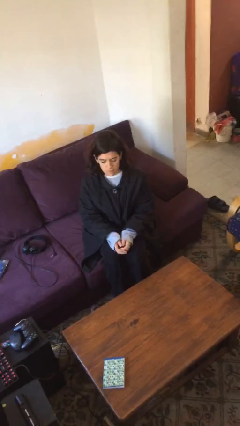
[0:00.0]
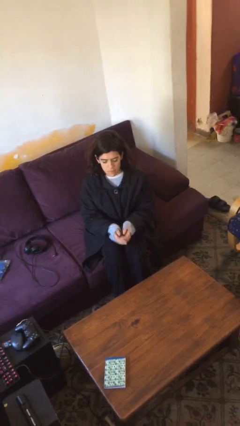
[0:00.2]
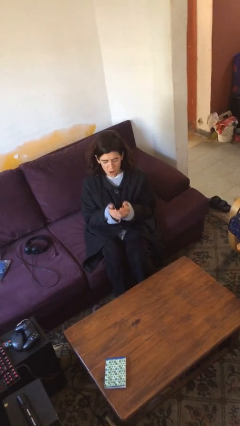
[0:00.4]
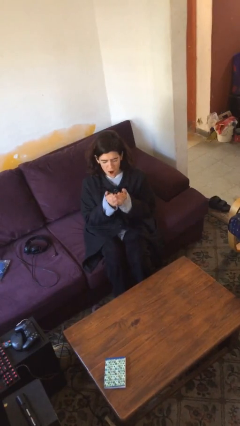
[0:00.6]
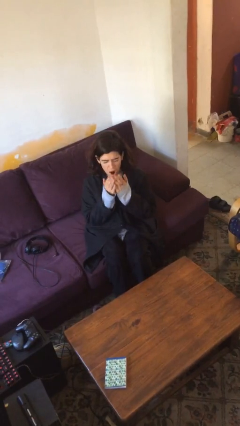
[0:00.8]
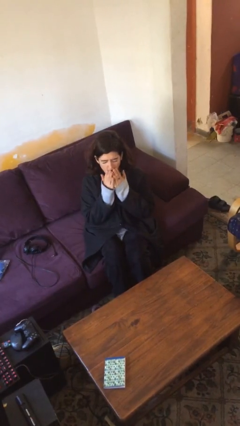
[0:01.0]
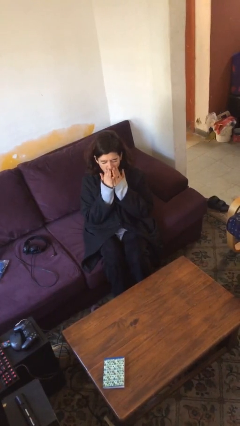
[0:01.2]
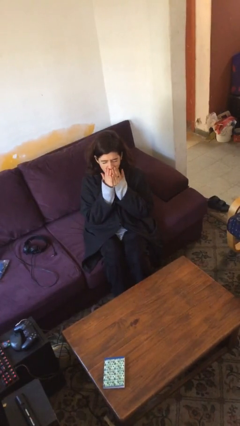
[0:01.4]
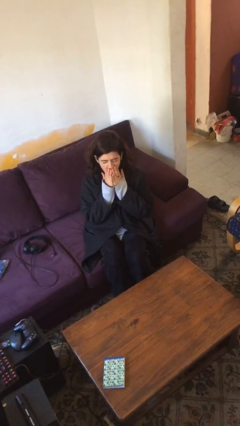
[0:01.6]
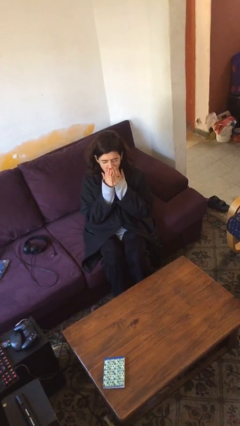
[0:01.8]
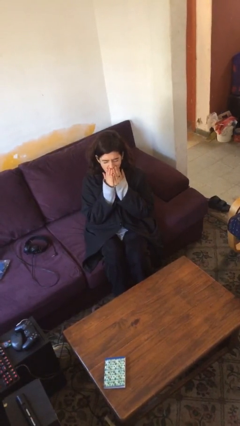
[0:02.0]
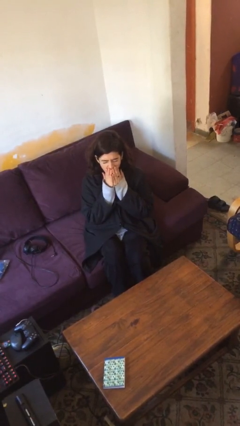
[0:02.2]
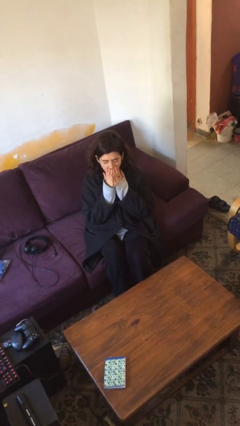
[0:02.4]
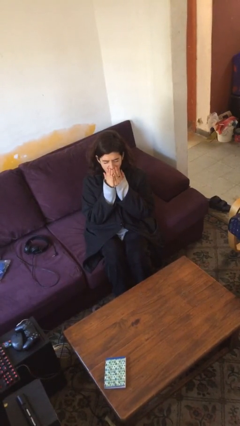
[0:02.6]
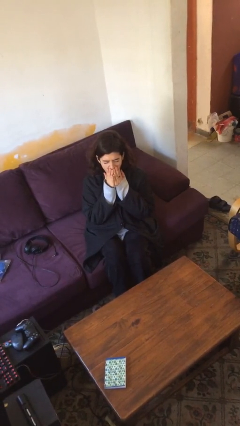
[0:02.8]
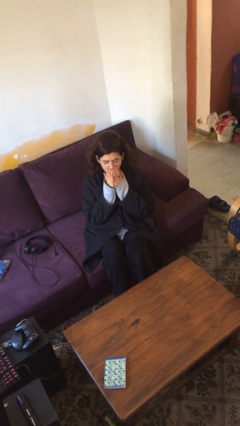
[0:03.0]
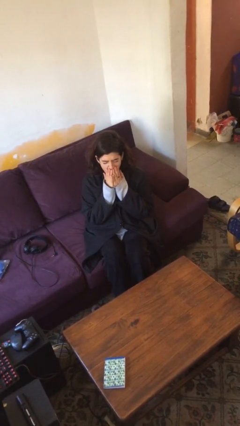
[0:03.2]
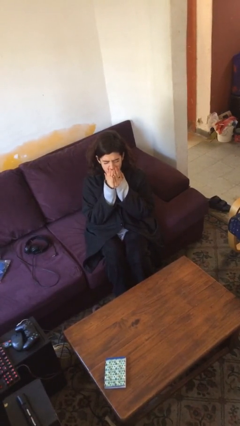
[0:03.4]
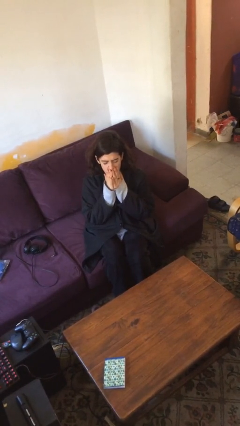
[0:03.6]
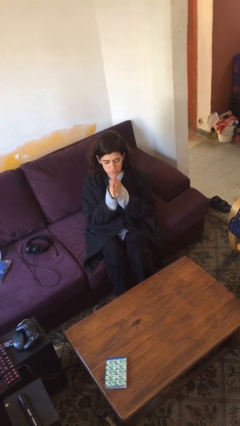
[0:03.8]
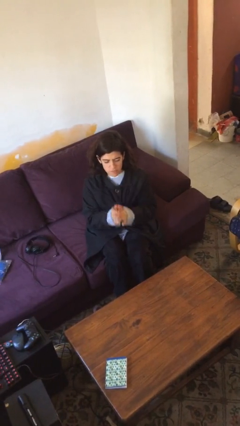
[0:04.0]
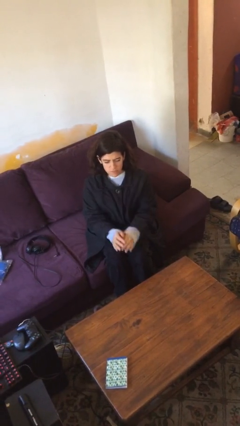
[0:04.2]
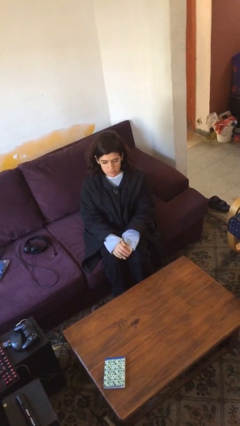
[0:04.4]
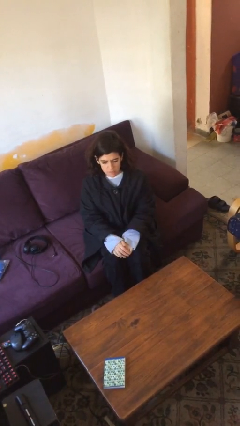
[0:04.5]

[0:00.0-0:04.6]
person yawns

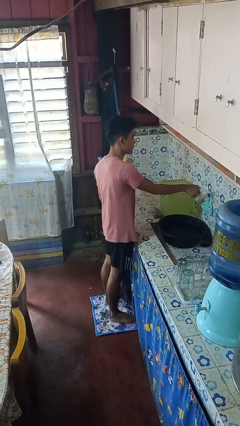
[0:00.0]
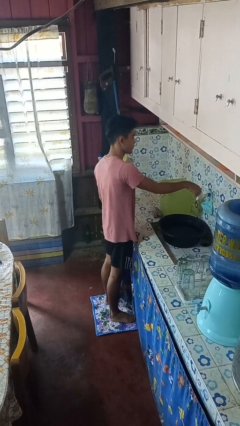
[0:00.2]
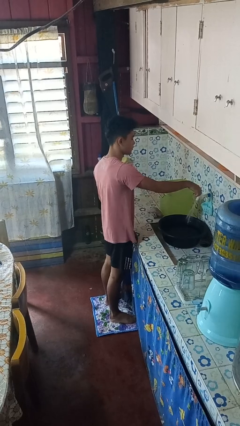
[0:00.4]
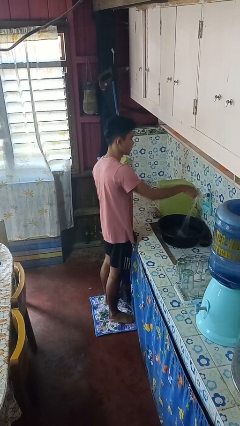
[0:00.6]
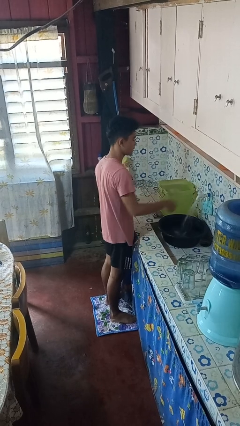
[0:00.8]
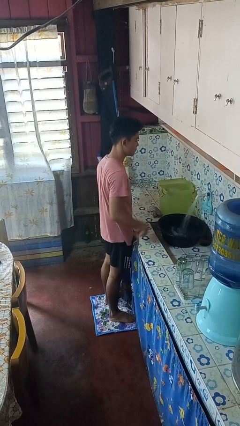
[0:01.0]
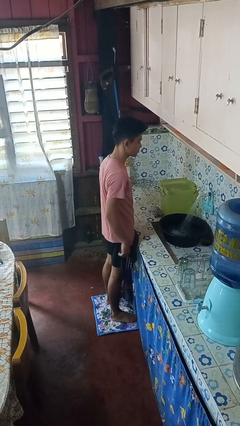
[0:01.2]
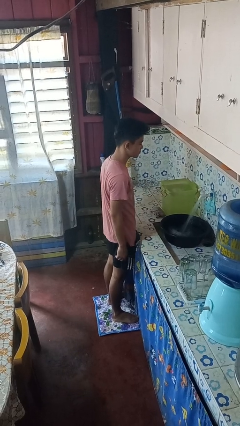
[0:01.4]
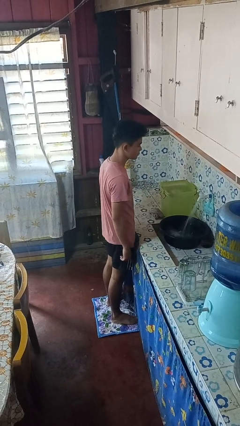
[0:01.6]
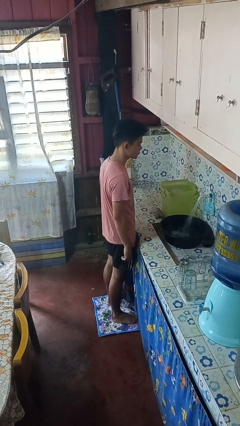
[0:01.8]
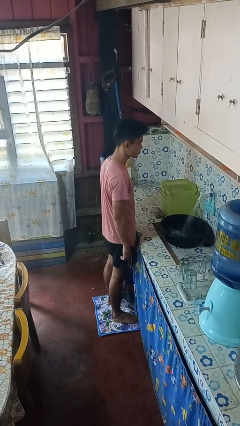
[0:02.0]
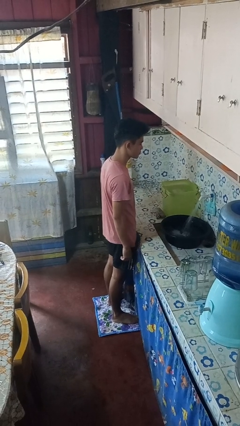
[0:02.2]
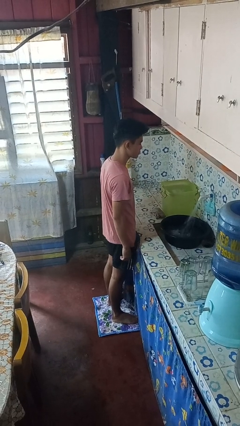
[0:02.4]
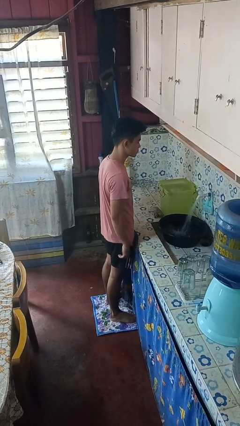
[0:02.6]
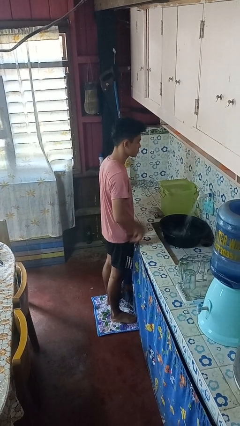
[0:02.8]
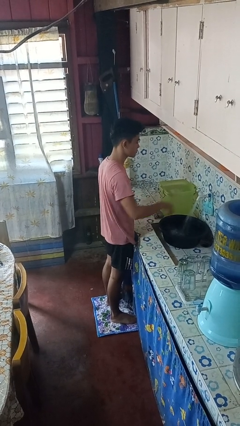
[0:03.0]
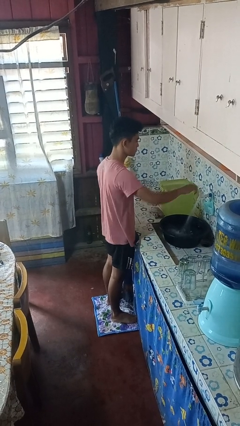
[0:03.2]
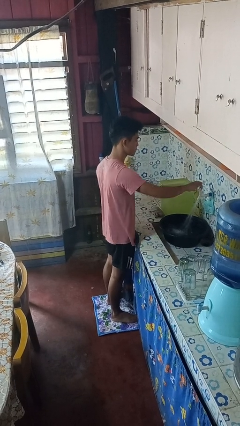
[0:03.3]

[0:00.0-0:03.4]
person turns on faucet

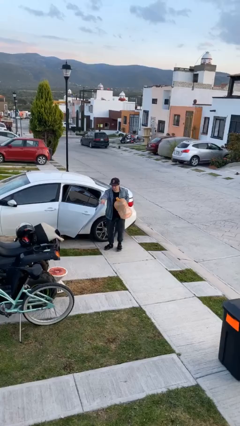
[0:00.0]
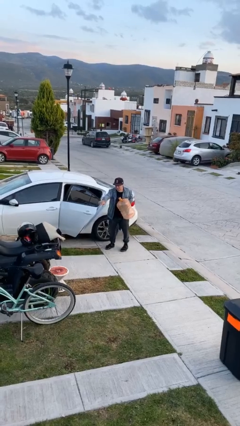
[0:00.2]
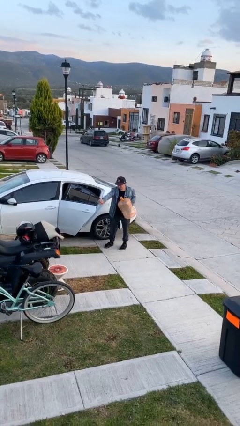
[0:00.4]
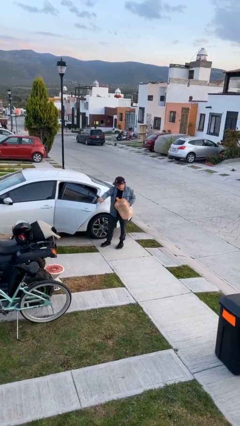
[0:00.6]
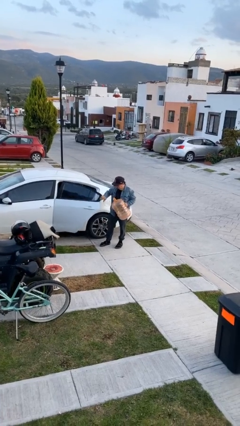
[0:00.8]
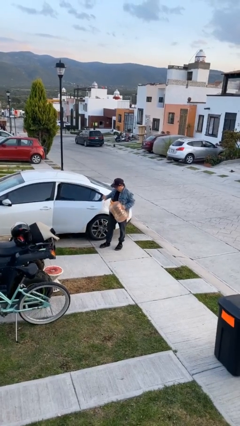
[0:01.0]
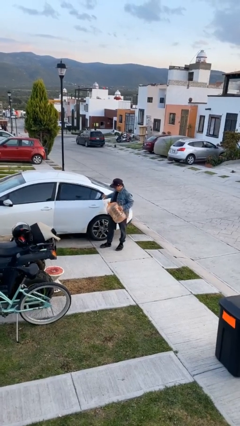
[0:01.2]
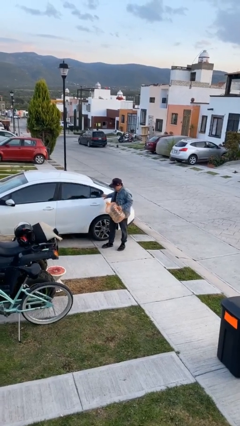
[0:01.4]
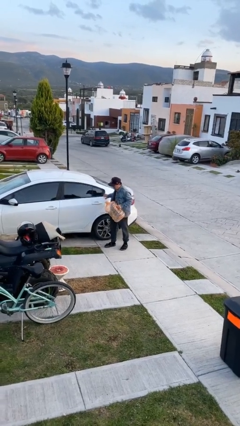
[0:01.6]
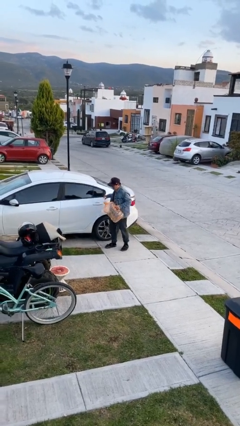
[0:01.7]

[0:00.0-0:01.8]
person closes car door

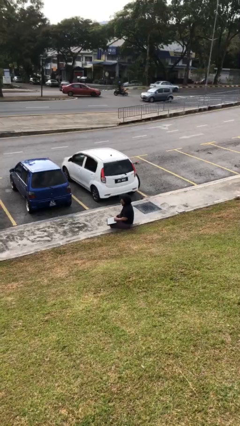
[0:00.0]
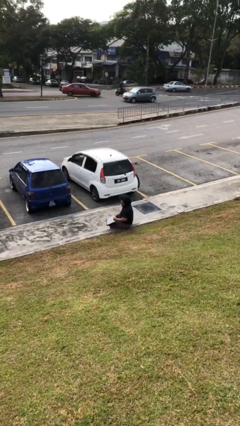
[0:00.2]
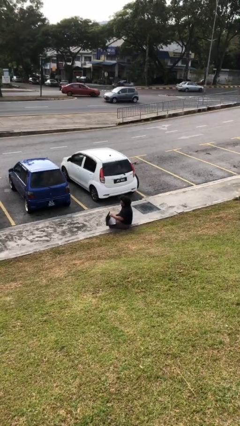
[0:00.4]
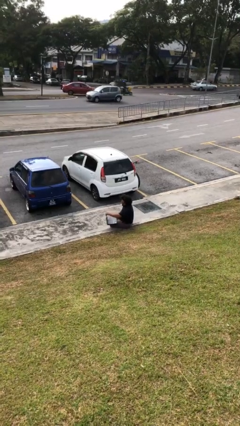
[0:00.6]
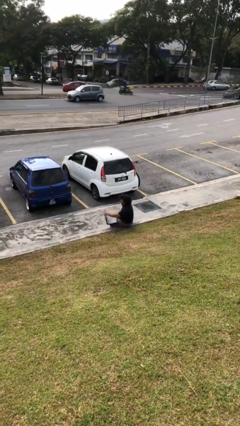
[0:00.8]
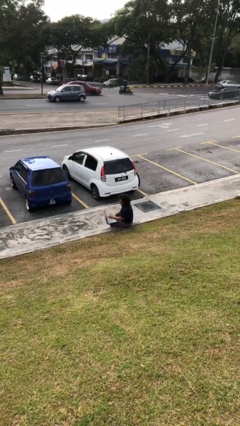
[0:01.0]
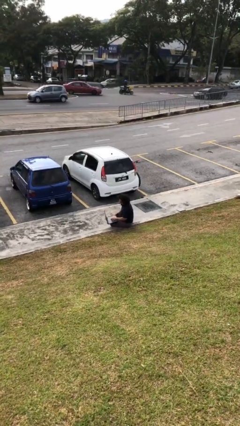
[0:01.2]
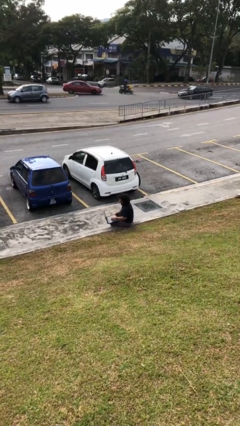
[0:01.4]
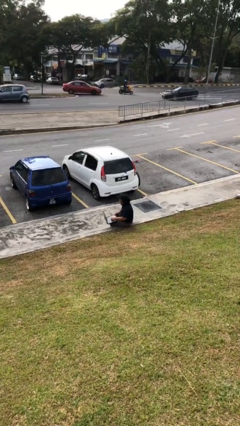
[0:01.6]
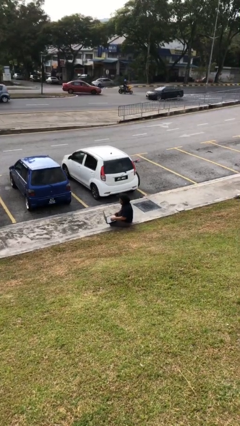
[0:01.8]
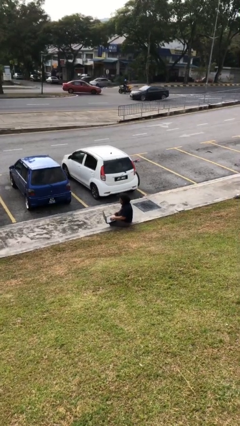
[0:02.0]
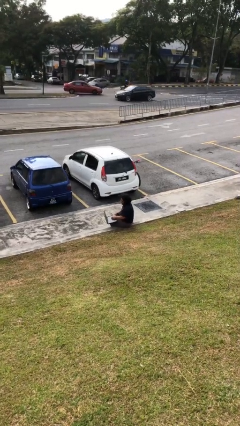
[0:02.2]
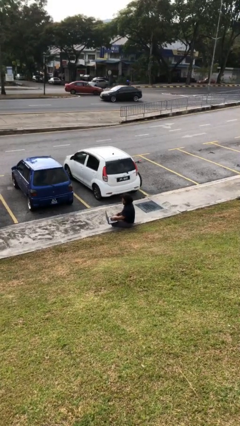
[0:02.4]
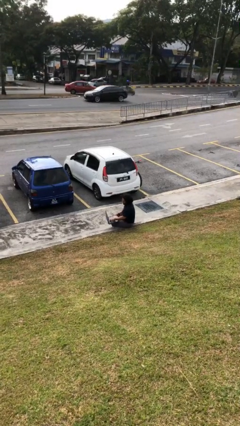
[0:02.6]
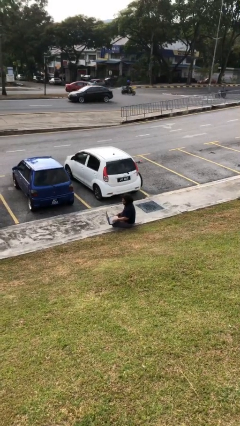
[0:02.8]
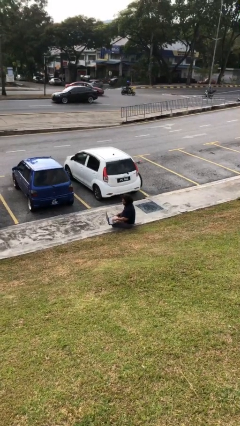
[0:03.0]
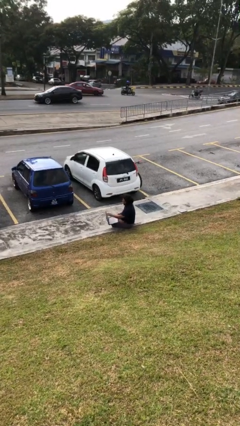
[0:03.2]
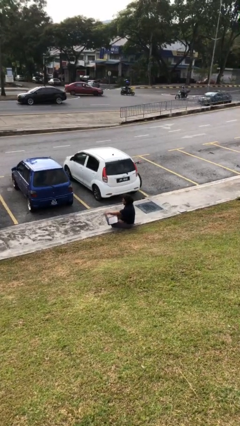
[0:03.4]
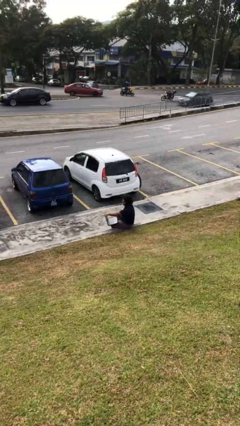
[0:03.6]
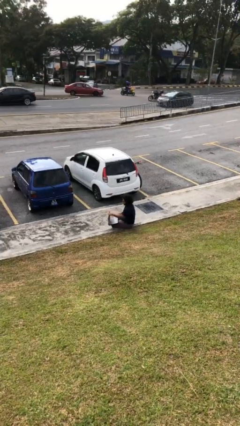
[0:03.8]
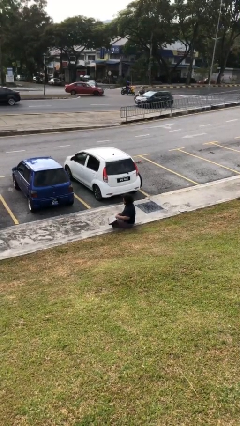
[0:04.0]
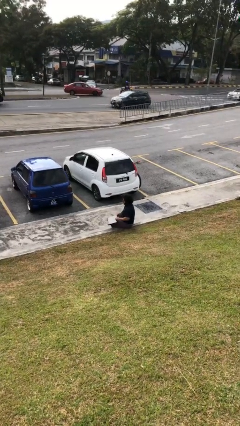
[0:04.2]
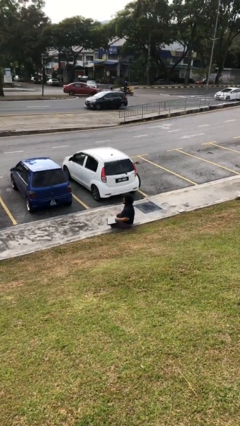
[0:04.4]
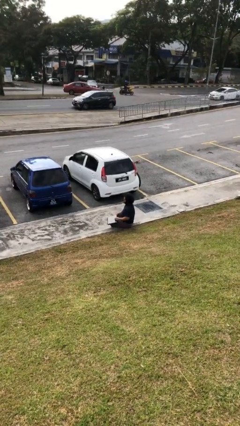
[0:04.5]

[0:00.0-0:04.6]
person interacts with laptop

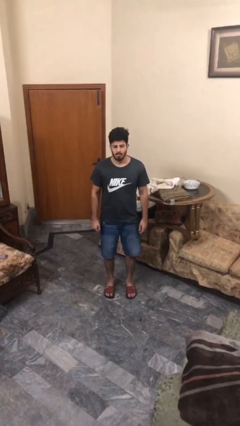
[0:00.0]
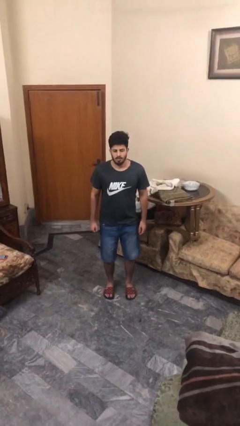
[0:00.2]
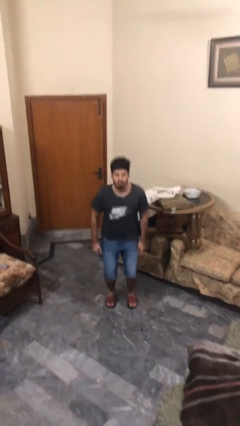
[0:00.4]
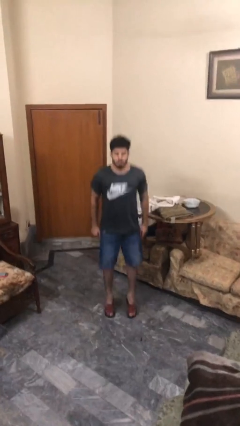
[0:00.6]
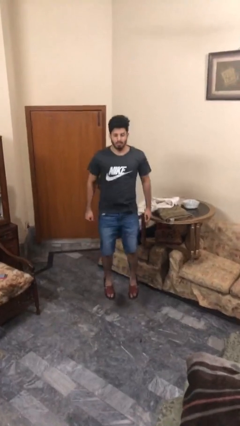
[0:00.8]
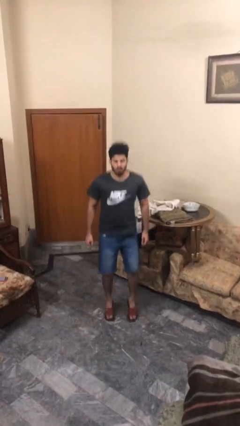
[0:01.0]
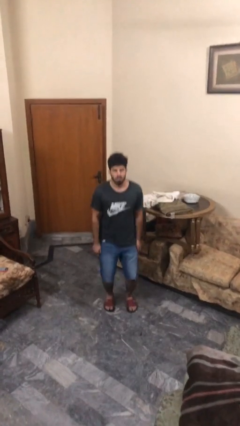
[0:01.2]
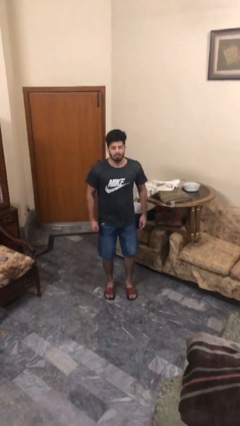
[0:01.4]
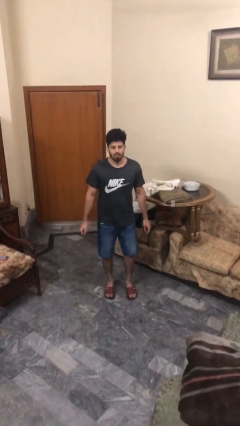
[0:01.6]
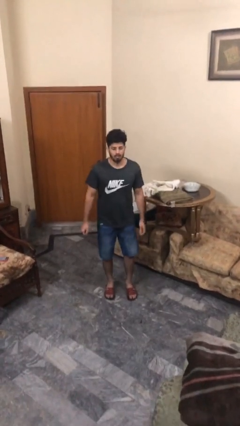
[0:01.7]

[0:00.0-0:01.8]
person jumps

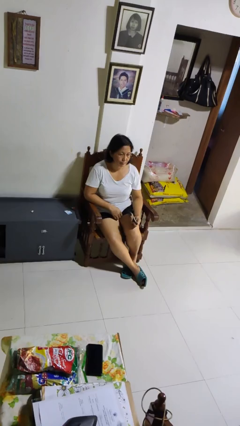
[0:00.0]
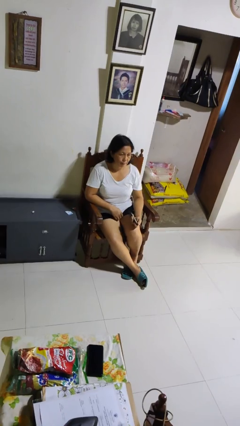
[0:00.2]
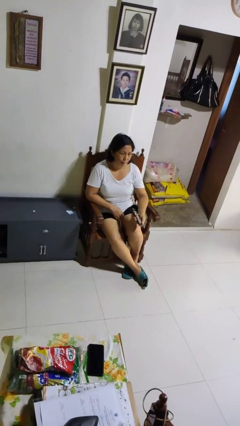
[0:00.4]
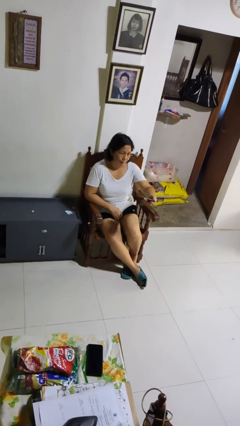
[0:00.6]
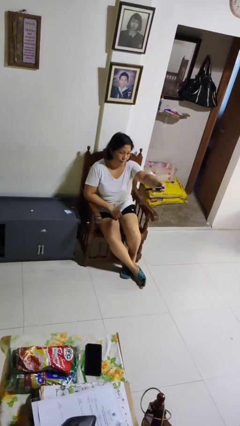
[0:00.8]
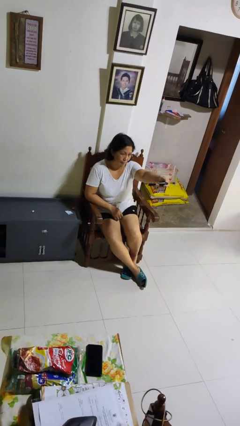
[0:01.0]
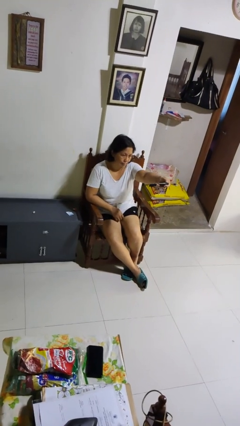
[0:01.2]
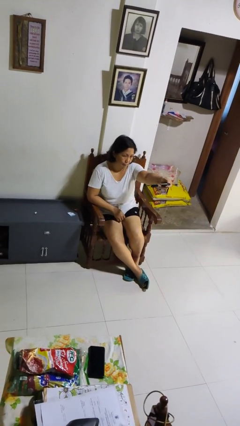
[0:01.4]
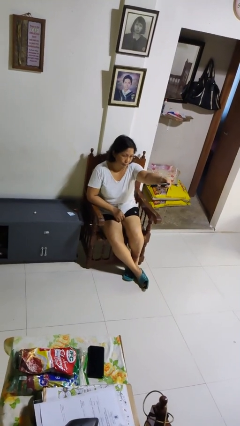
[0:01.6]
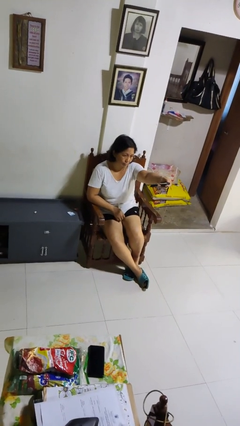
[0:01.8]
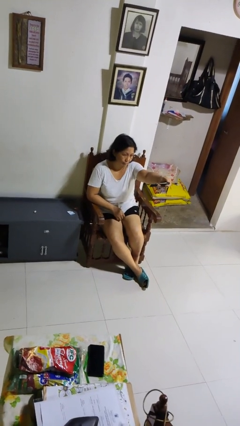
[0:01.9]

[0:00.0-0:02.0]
person uses television remote
